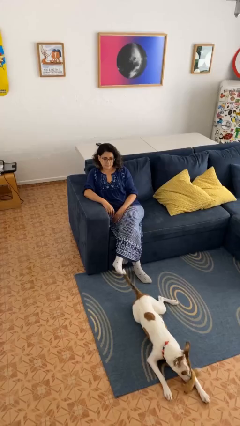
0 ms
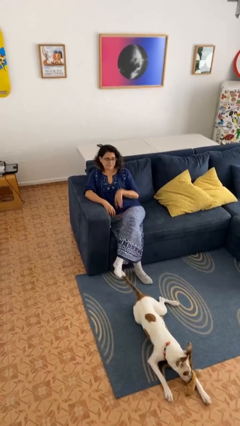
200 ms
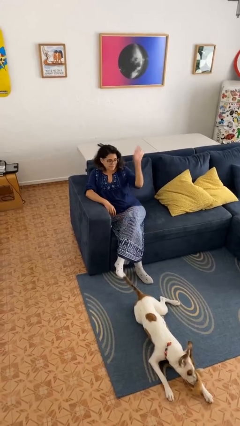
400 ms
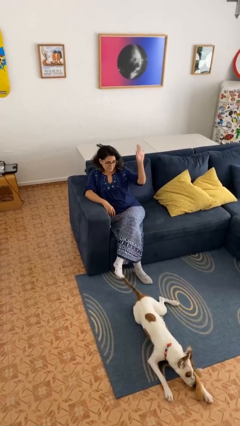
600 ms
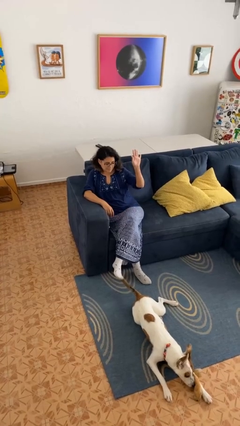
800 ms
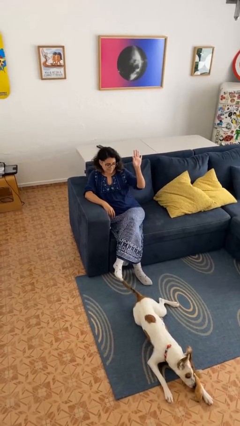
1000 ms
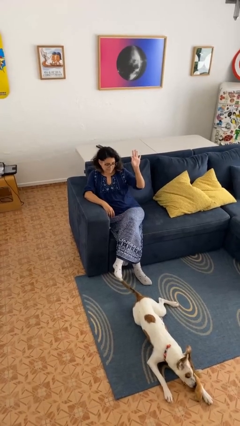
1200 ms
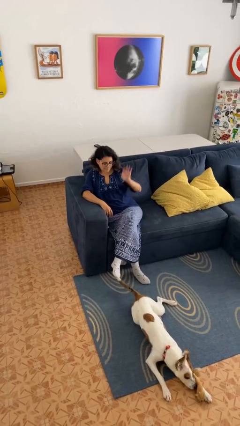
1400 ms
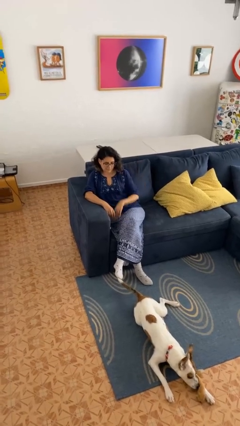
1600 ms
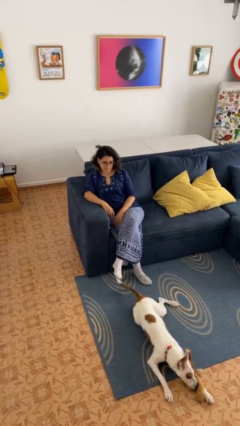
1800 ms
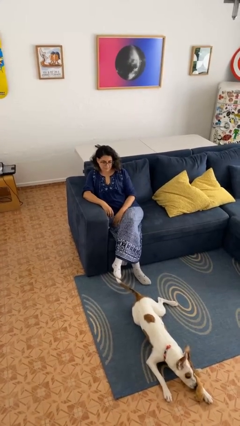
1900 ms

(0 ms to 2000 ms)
person gestures stop

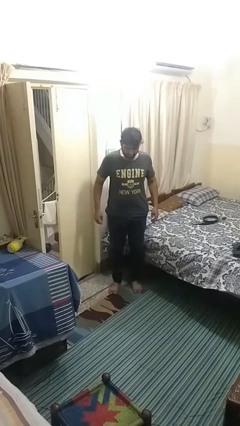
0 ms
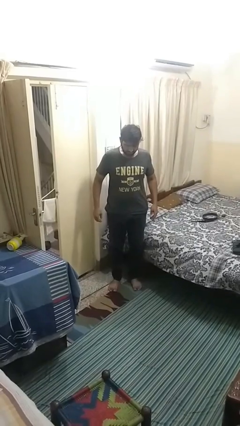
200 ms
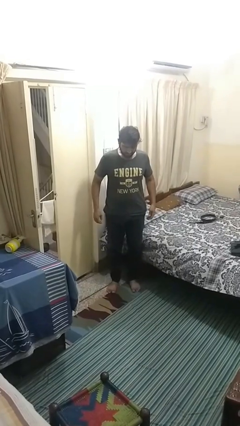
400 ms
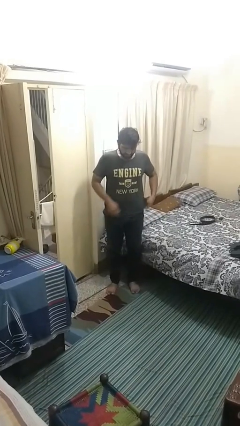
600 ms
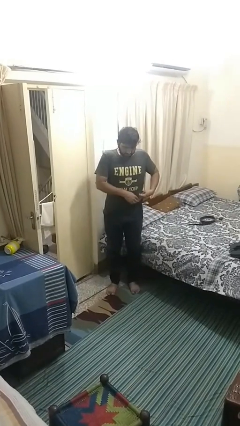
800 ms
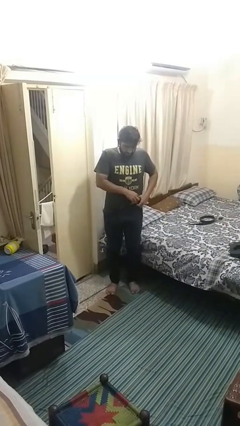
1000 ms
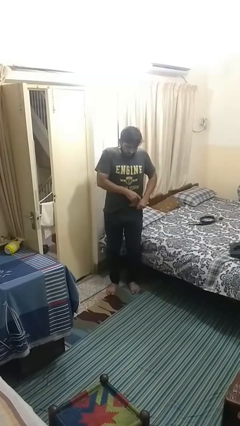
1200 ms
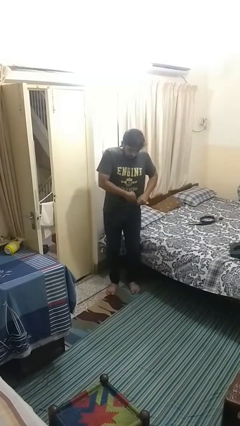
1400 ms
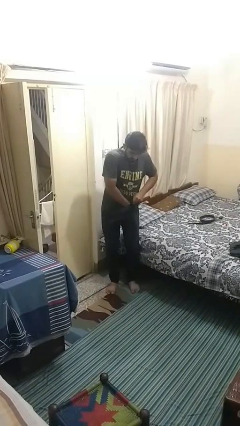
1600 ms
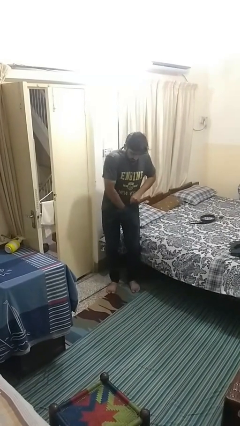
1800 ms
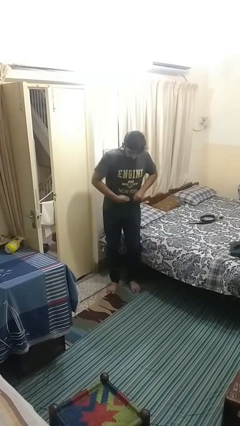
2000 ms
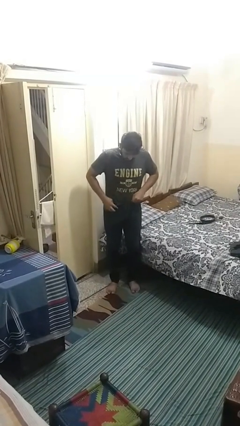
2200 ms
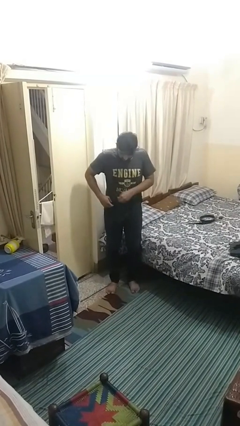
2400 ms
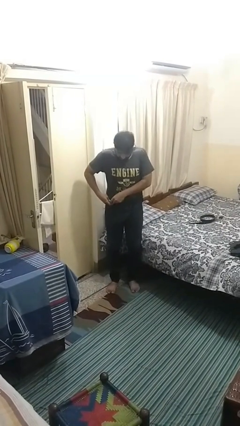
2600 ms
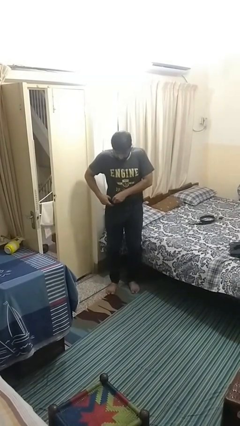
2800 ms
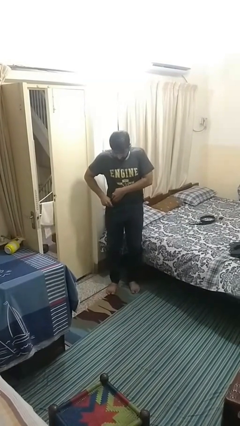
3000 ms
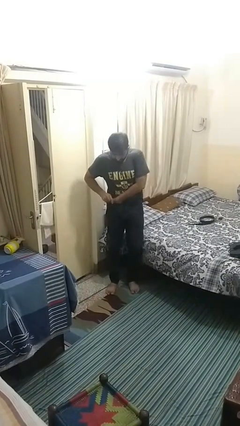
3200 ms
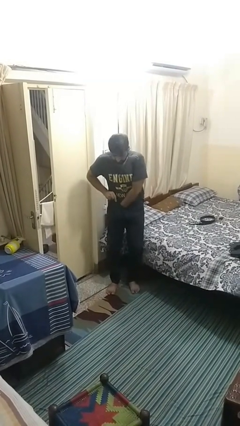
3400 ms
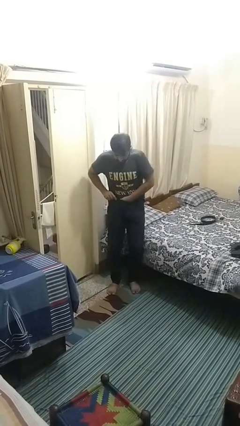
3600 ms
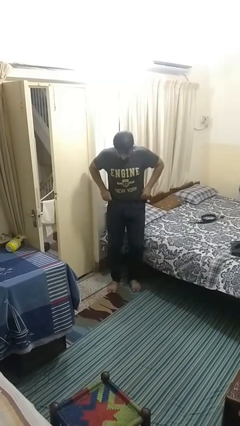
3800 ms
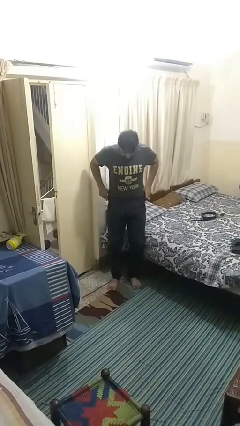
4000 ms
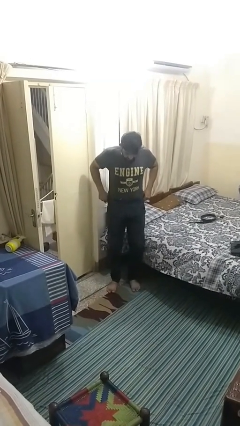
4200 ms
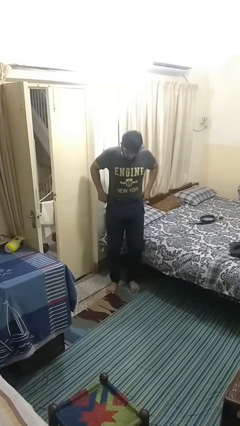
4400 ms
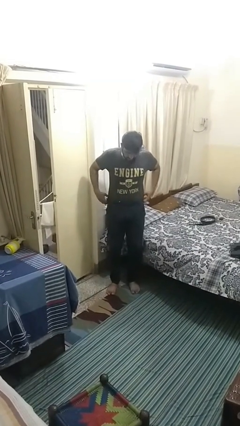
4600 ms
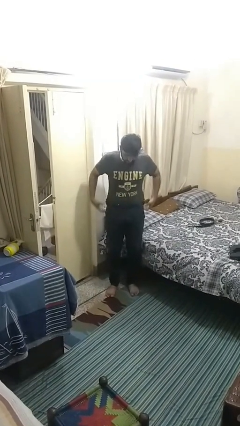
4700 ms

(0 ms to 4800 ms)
person tucks in shirt

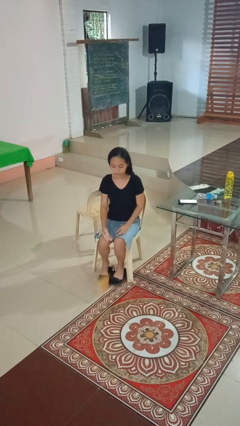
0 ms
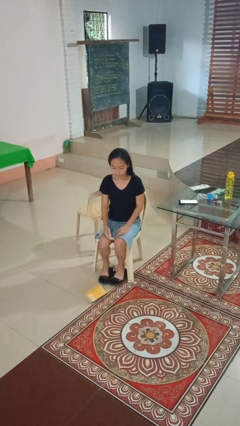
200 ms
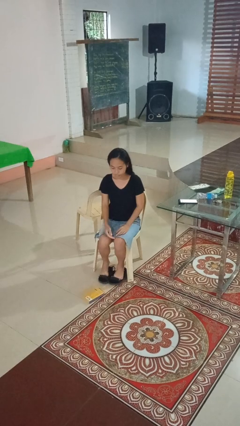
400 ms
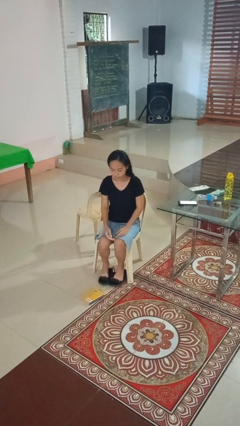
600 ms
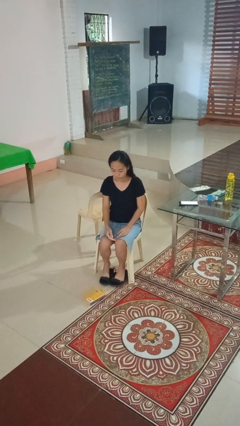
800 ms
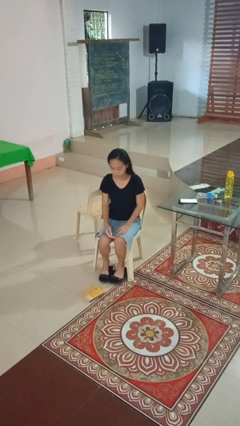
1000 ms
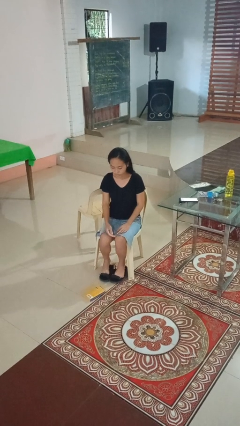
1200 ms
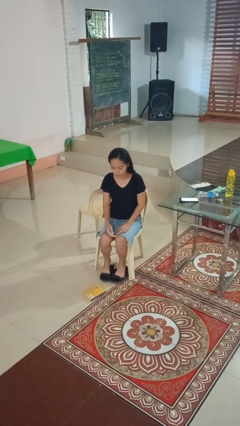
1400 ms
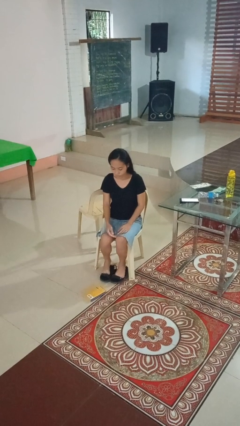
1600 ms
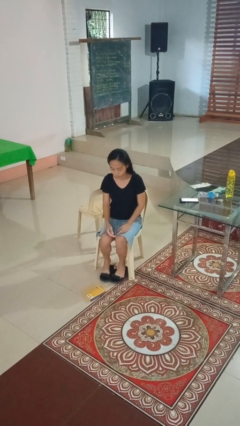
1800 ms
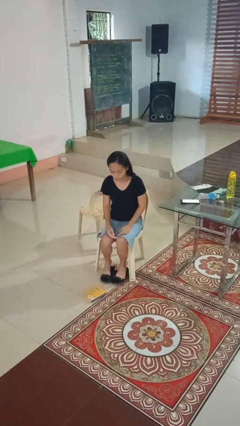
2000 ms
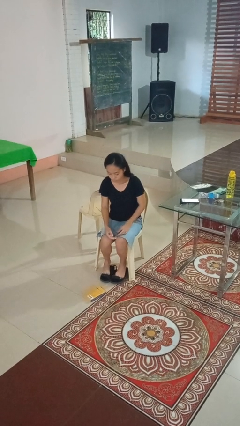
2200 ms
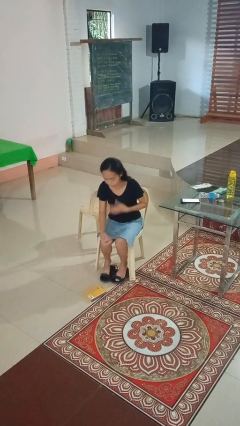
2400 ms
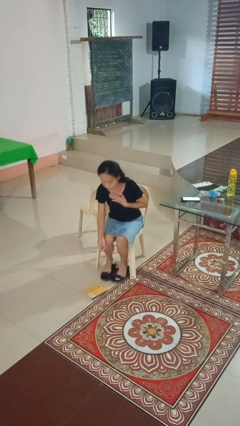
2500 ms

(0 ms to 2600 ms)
person drops object

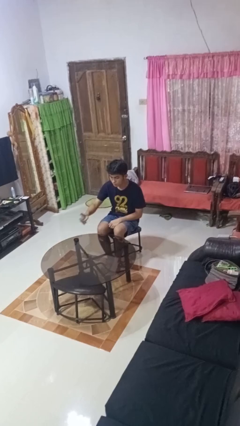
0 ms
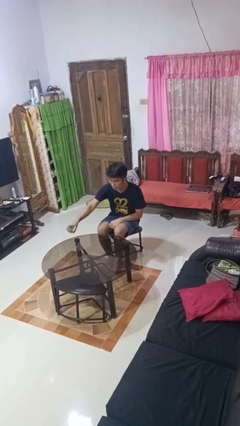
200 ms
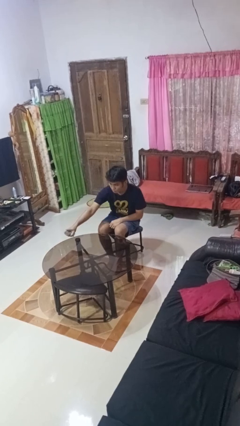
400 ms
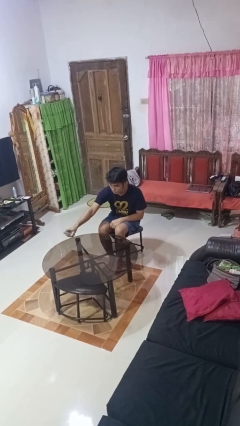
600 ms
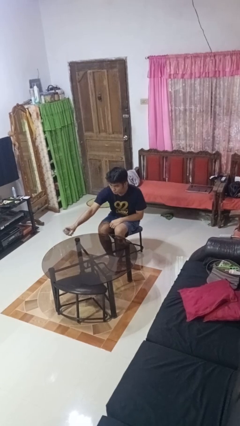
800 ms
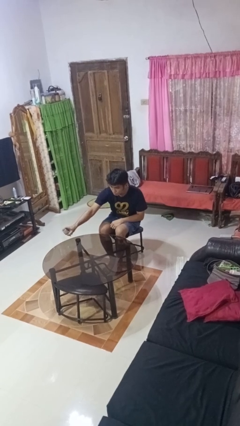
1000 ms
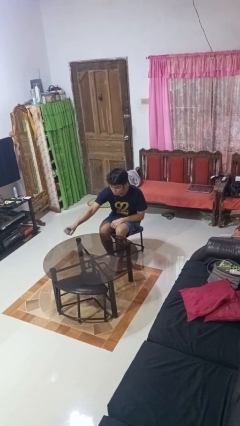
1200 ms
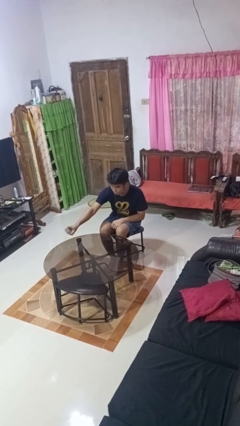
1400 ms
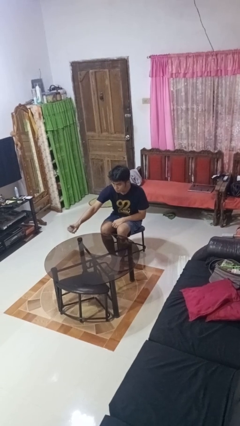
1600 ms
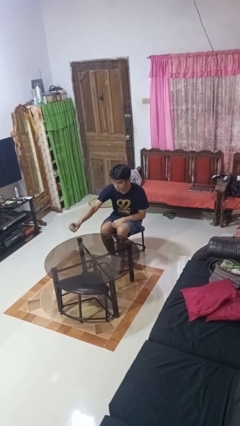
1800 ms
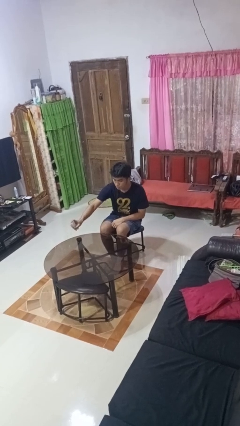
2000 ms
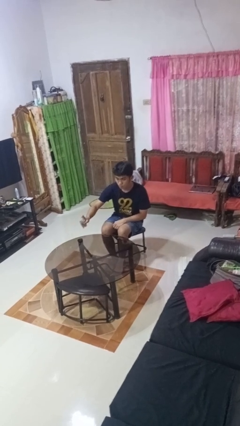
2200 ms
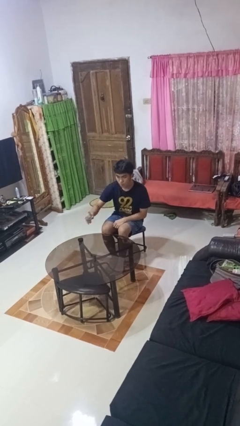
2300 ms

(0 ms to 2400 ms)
person sprays from bottle

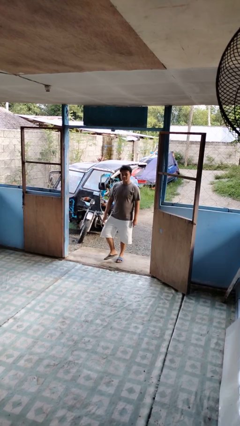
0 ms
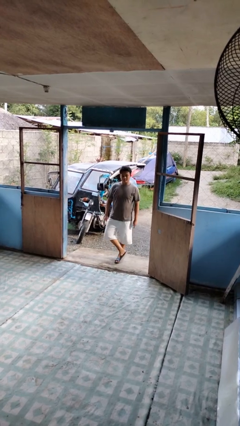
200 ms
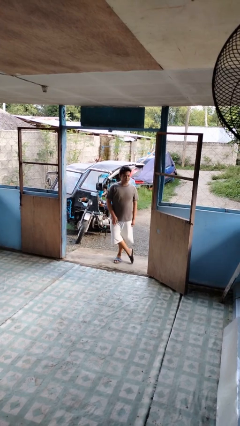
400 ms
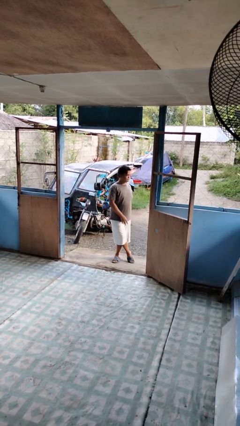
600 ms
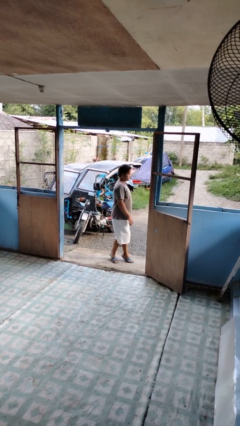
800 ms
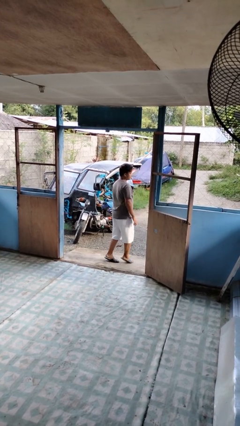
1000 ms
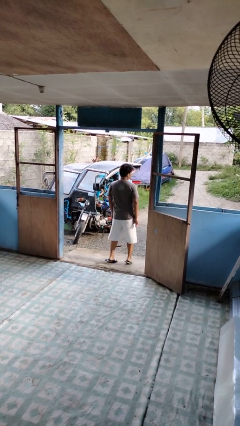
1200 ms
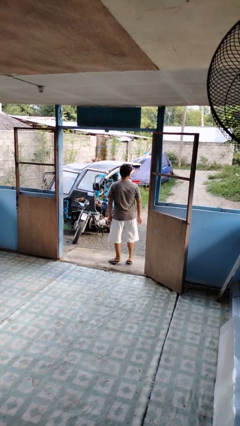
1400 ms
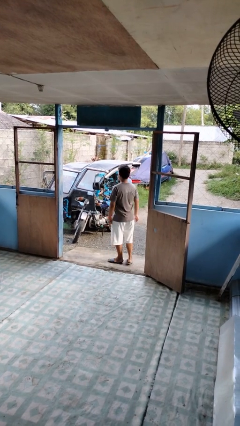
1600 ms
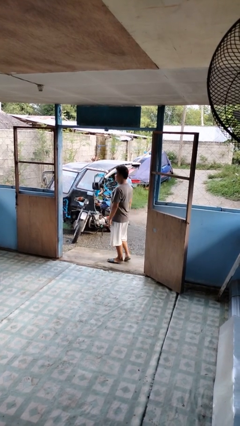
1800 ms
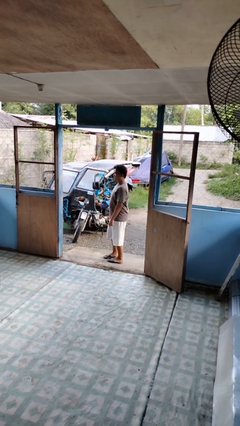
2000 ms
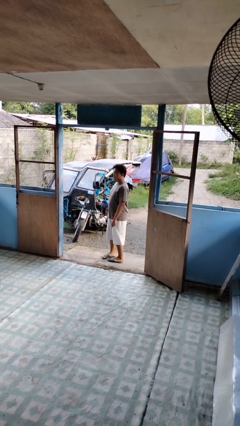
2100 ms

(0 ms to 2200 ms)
person twirls

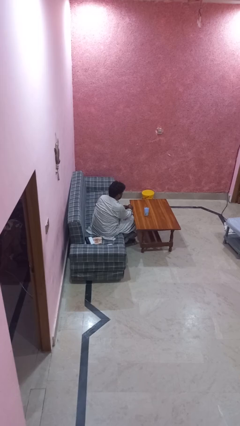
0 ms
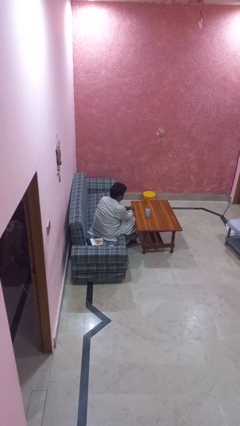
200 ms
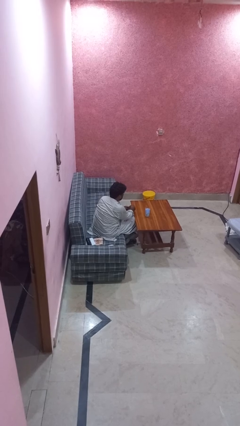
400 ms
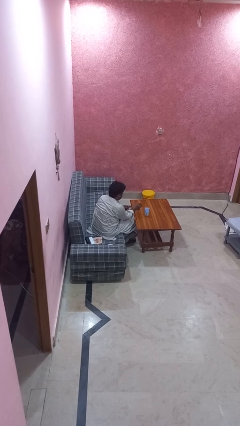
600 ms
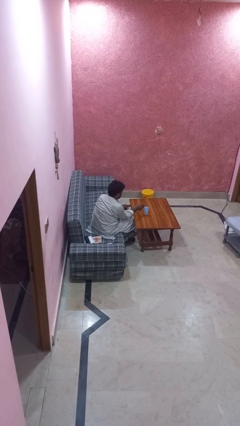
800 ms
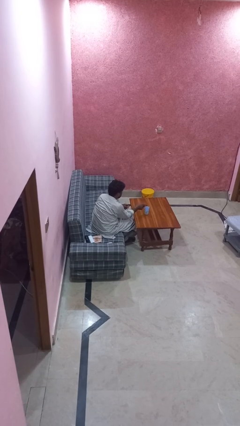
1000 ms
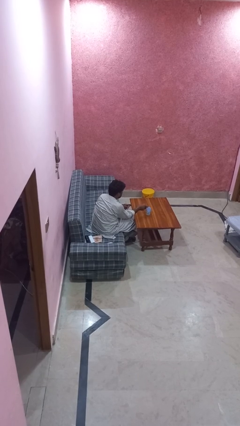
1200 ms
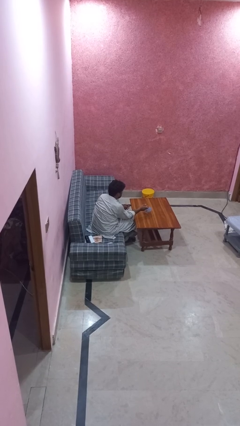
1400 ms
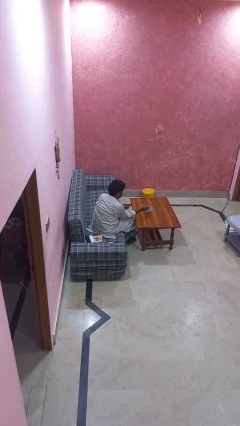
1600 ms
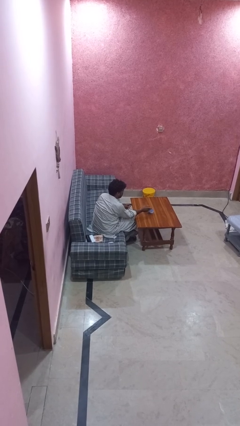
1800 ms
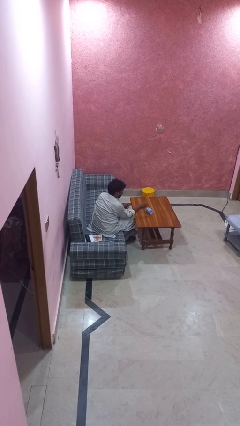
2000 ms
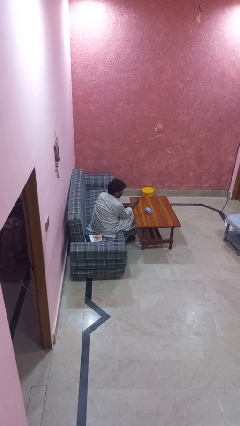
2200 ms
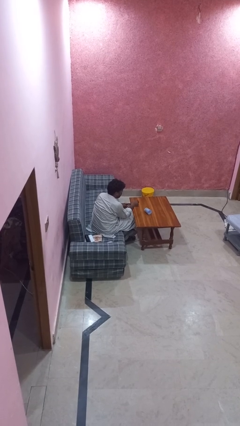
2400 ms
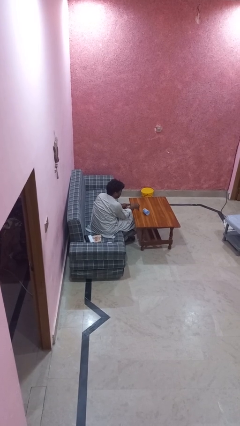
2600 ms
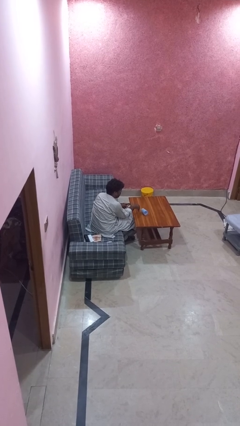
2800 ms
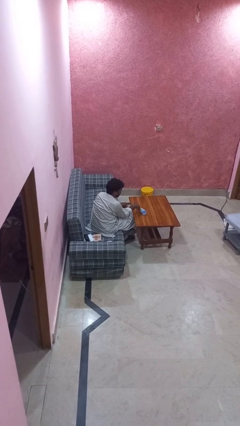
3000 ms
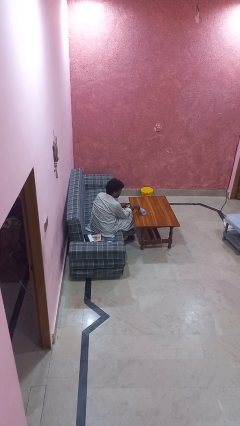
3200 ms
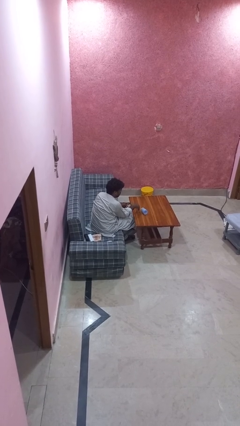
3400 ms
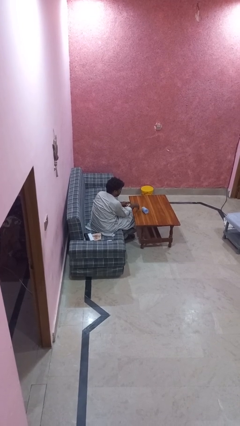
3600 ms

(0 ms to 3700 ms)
person spills on table
